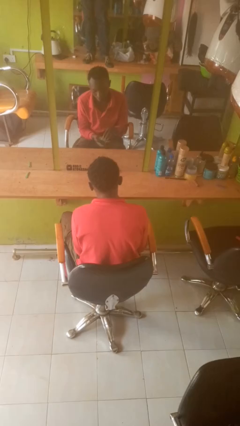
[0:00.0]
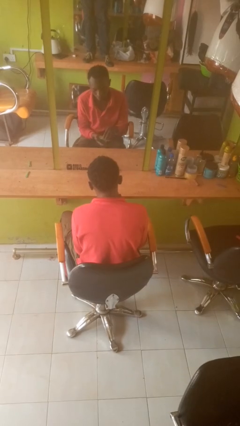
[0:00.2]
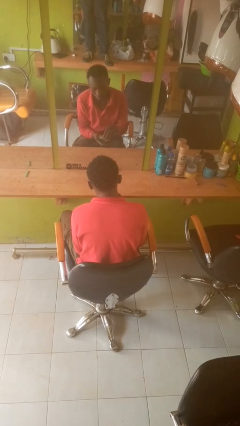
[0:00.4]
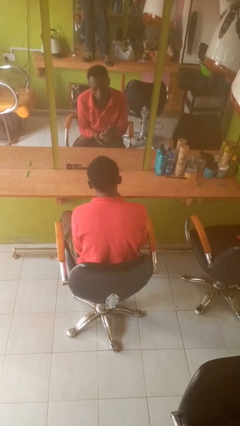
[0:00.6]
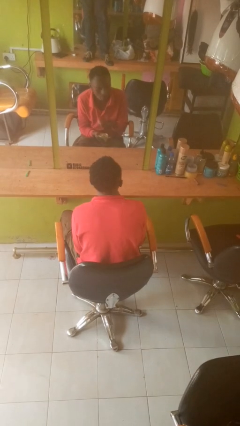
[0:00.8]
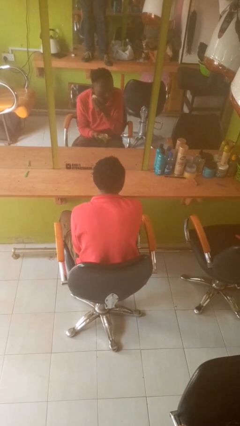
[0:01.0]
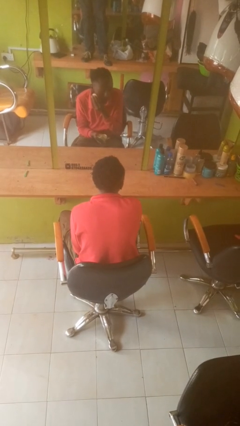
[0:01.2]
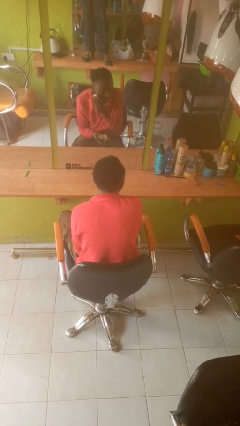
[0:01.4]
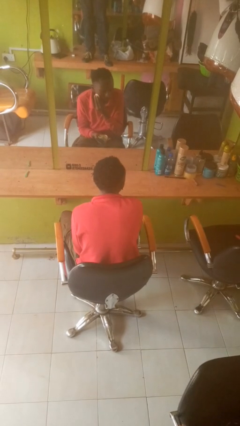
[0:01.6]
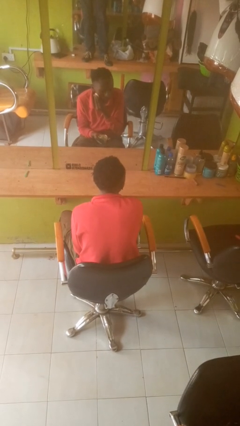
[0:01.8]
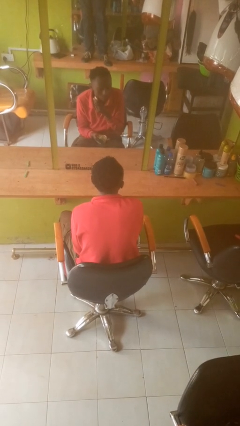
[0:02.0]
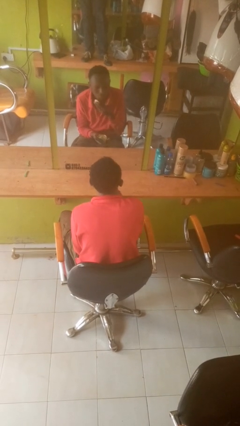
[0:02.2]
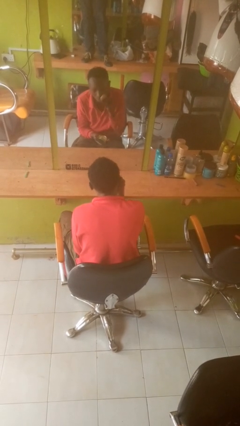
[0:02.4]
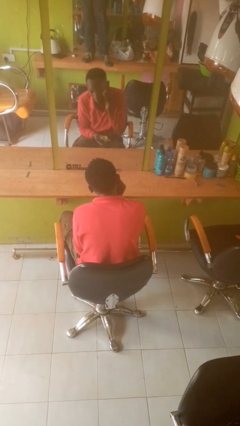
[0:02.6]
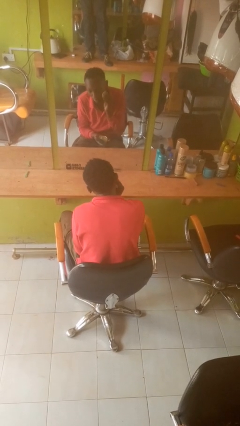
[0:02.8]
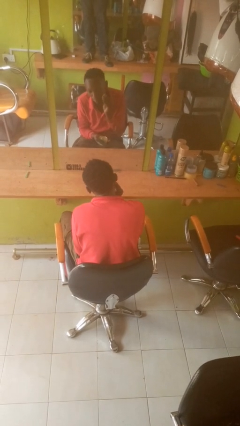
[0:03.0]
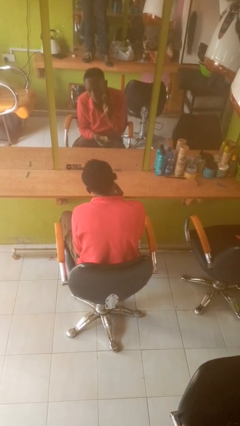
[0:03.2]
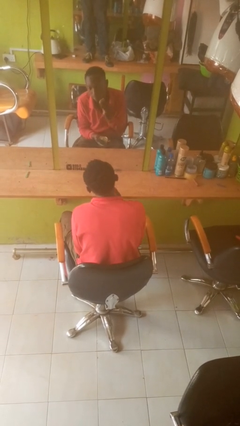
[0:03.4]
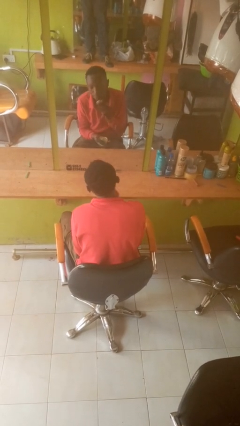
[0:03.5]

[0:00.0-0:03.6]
person applies foundation makeup

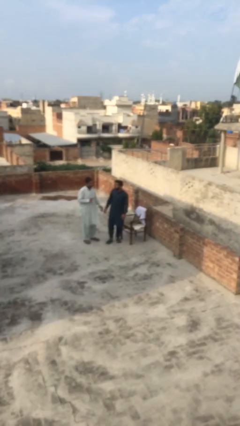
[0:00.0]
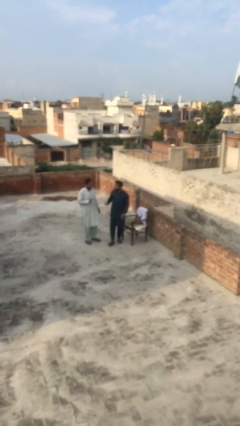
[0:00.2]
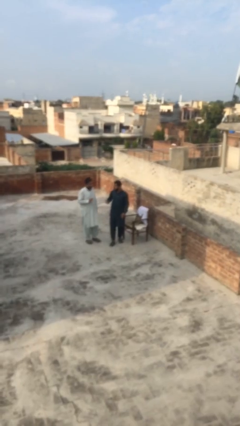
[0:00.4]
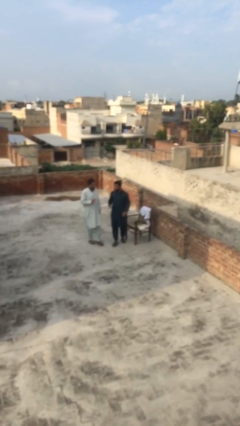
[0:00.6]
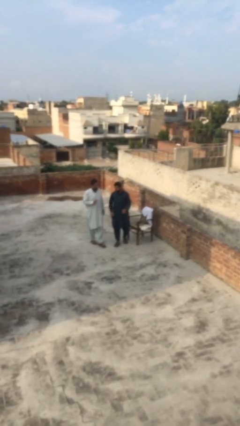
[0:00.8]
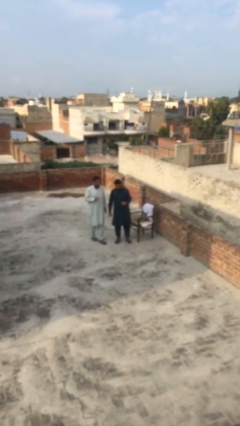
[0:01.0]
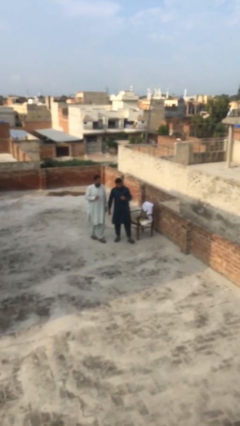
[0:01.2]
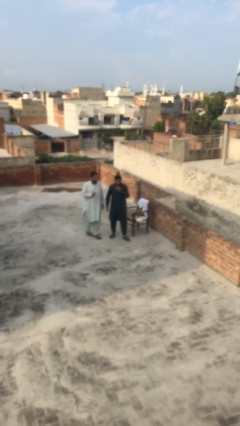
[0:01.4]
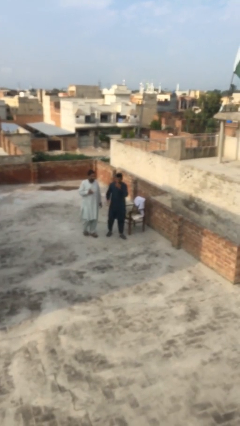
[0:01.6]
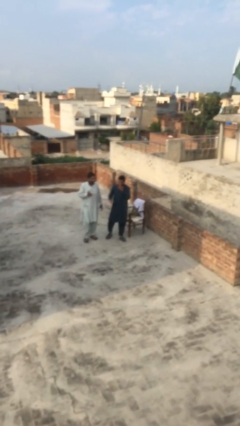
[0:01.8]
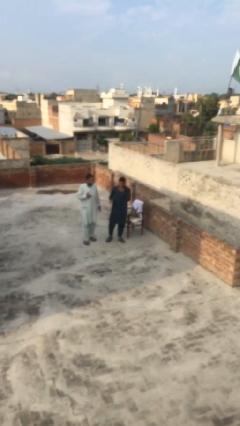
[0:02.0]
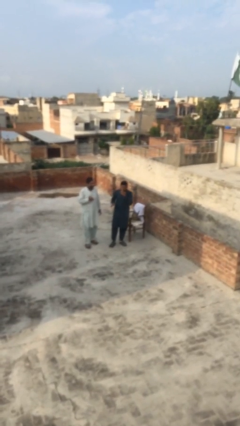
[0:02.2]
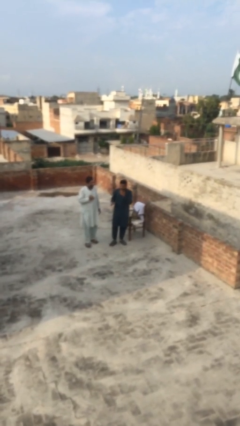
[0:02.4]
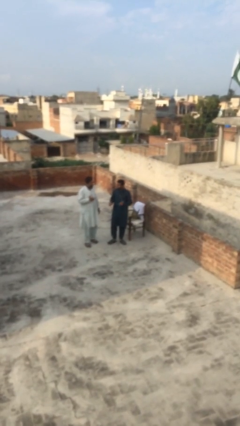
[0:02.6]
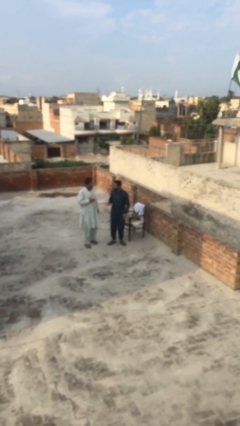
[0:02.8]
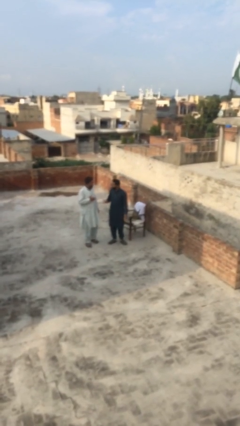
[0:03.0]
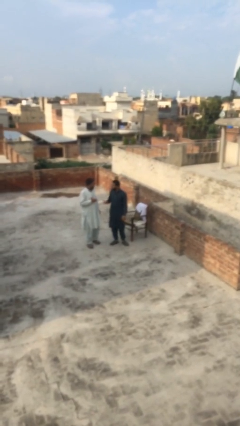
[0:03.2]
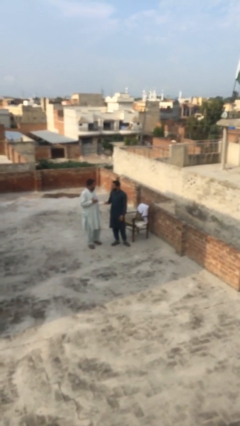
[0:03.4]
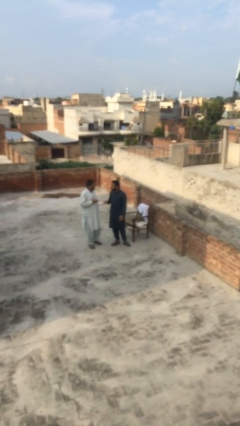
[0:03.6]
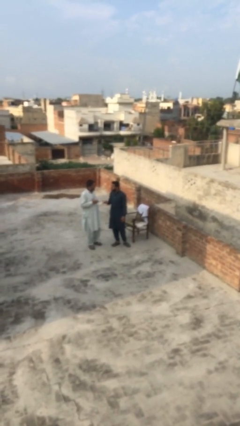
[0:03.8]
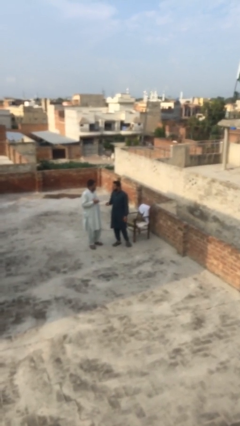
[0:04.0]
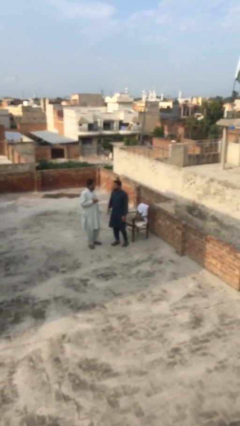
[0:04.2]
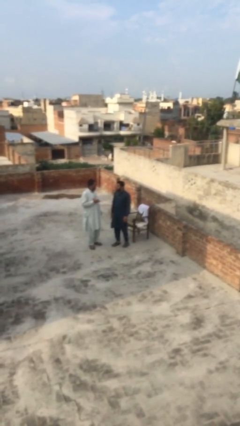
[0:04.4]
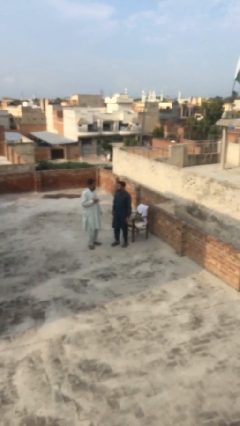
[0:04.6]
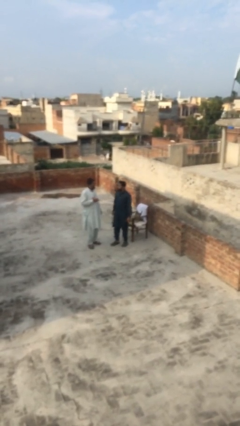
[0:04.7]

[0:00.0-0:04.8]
person talks to person

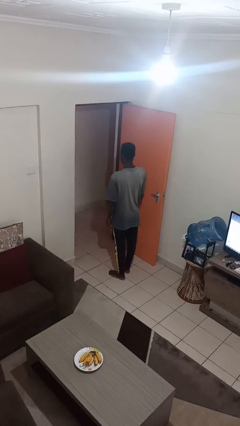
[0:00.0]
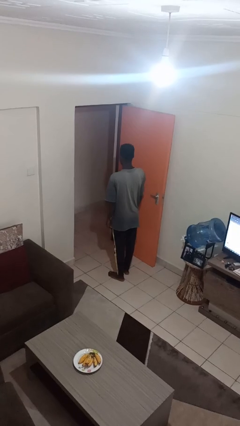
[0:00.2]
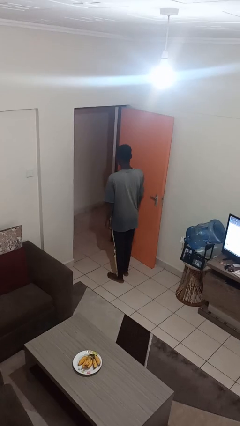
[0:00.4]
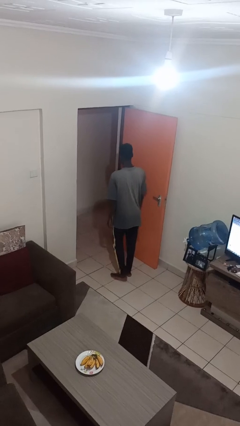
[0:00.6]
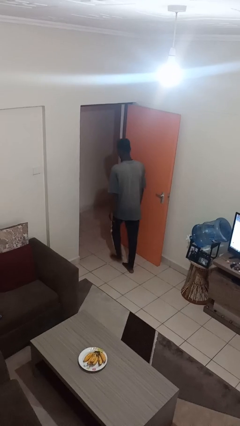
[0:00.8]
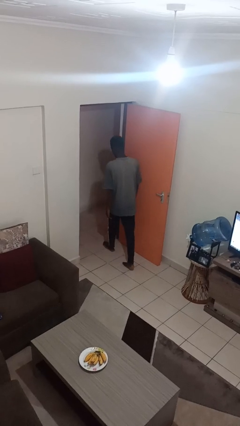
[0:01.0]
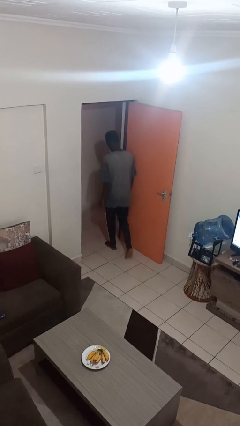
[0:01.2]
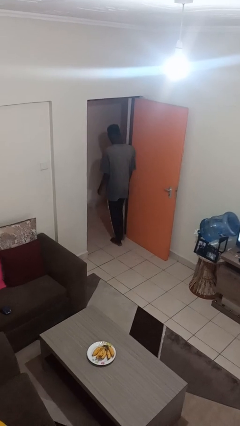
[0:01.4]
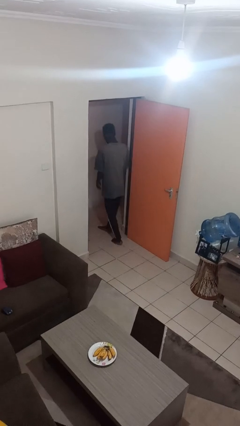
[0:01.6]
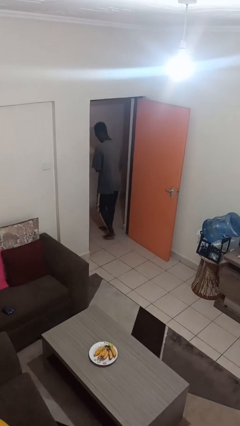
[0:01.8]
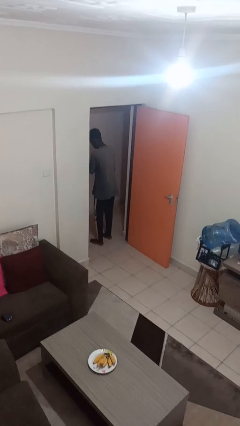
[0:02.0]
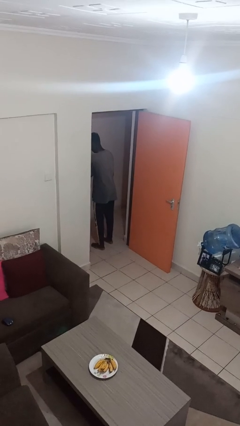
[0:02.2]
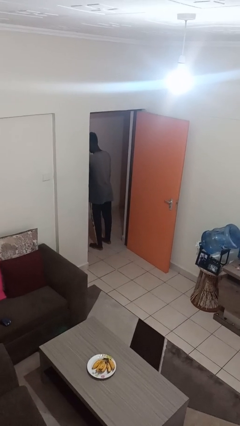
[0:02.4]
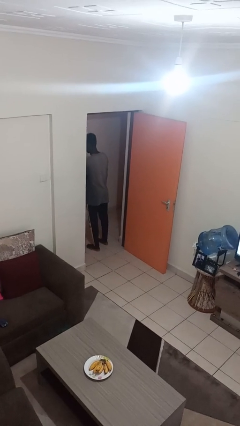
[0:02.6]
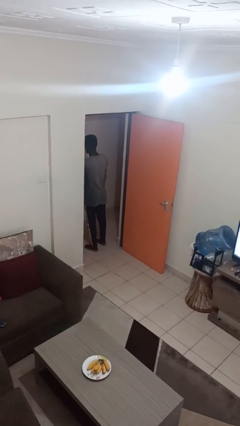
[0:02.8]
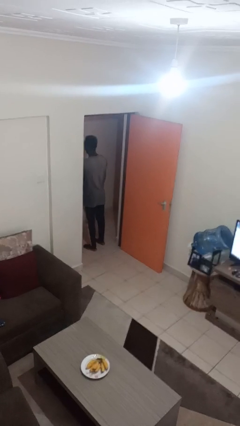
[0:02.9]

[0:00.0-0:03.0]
person bumps into wall

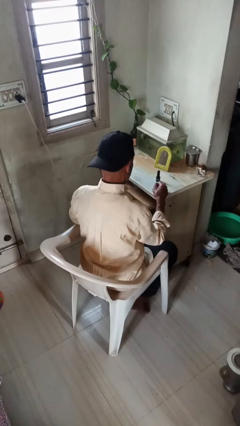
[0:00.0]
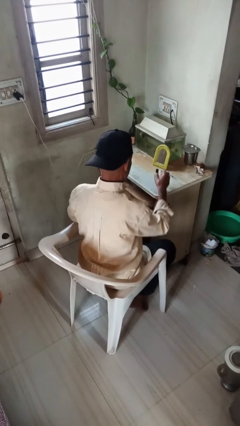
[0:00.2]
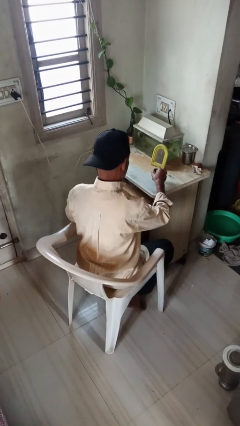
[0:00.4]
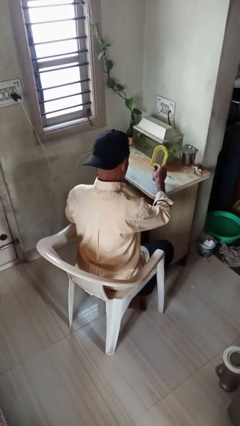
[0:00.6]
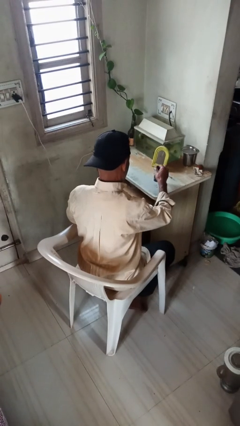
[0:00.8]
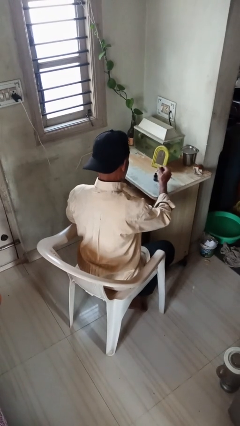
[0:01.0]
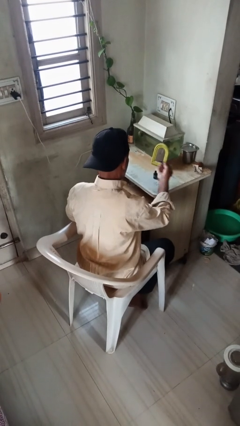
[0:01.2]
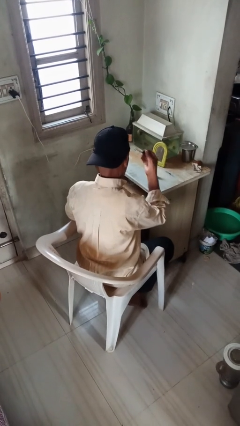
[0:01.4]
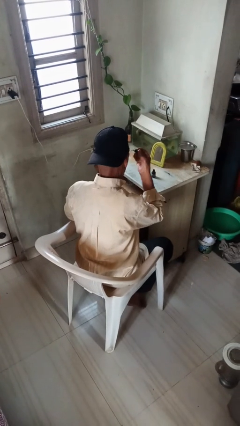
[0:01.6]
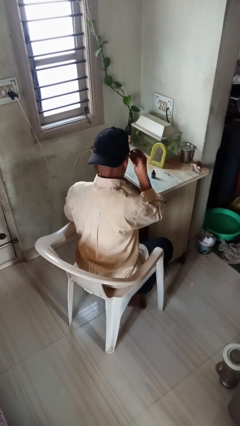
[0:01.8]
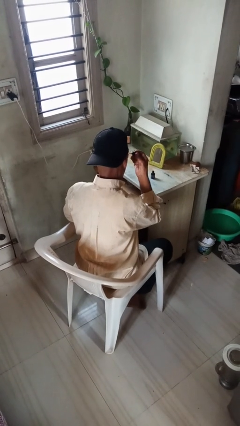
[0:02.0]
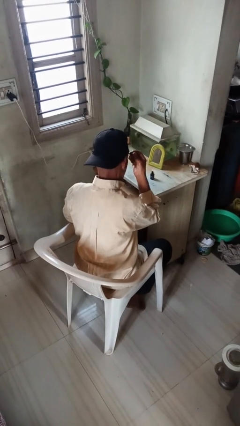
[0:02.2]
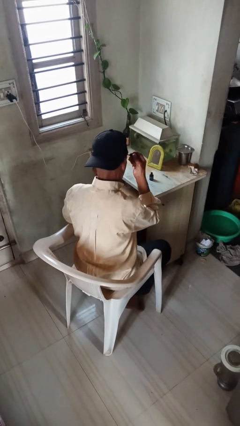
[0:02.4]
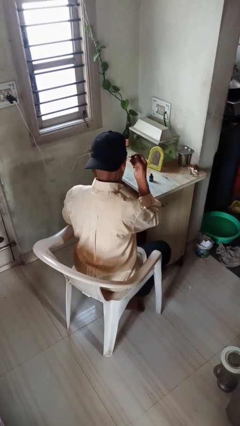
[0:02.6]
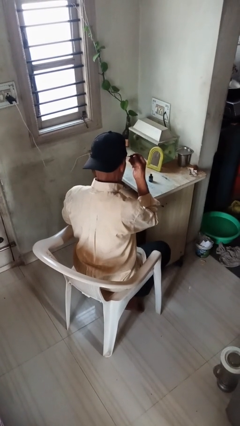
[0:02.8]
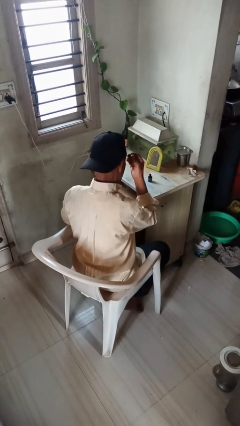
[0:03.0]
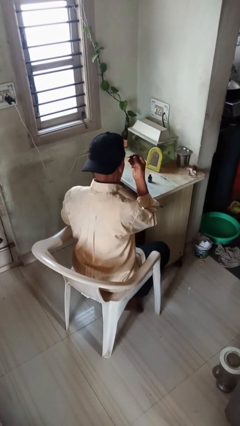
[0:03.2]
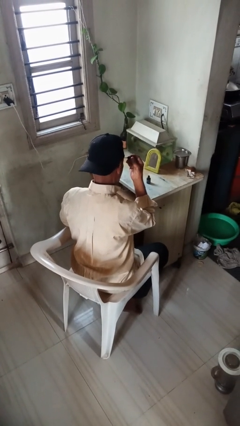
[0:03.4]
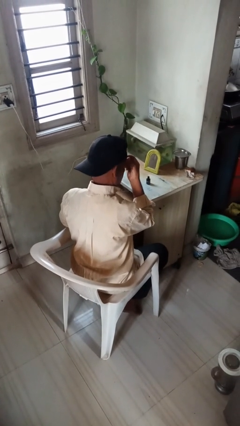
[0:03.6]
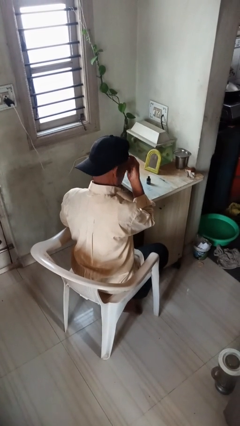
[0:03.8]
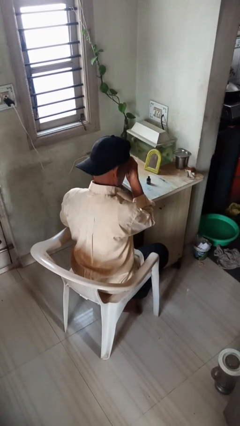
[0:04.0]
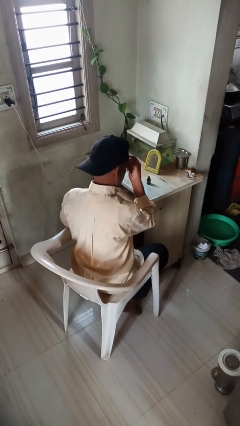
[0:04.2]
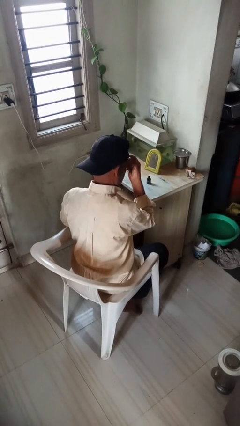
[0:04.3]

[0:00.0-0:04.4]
person applies eye makeup

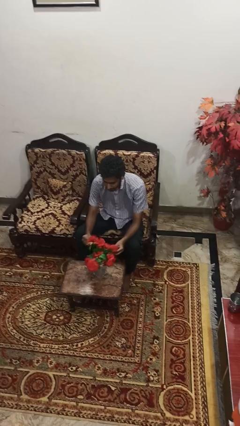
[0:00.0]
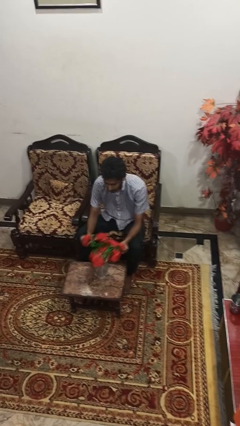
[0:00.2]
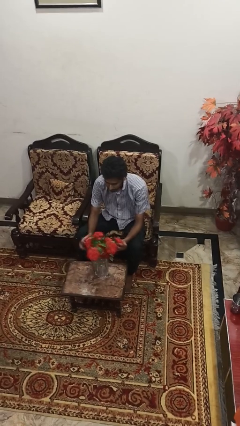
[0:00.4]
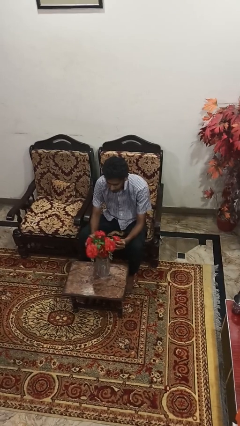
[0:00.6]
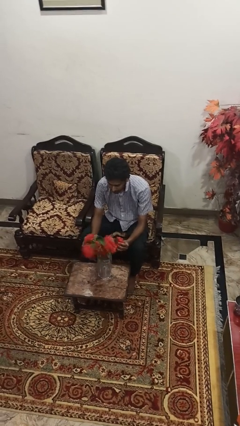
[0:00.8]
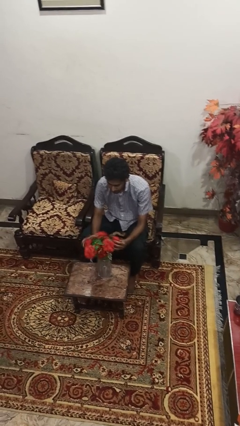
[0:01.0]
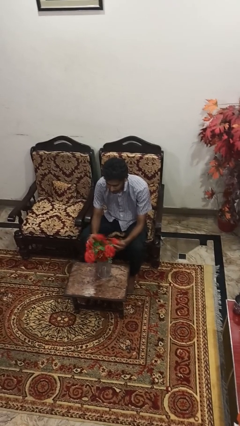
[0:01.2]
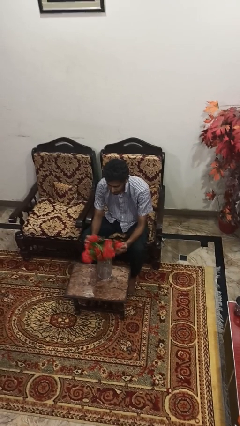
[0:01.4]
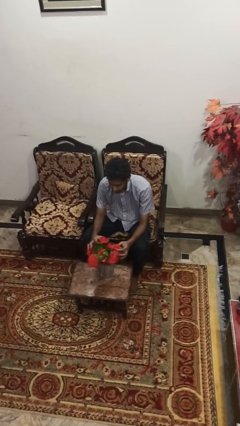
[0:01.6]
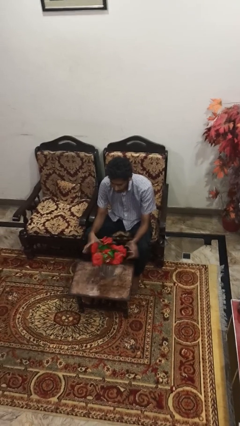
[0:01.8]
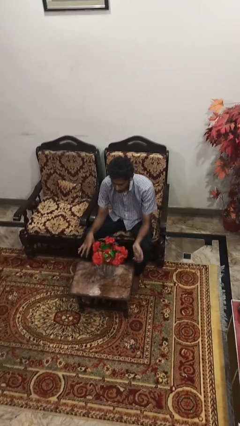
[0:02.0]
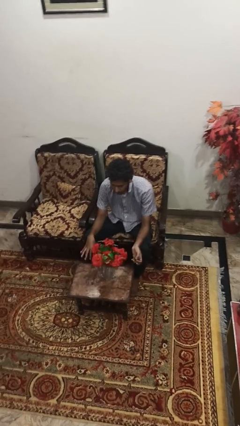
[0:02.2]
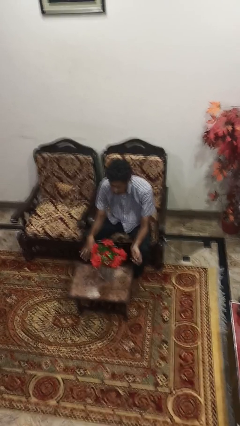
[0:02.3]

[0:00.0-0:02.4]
person arranges flowers in vase
